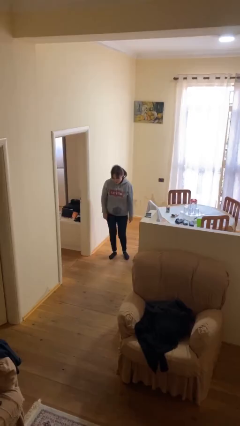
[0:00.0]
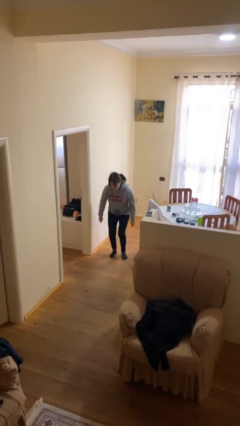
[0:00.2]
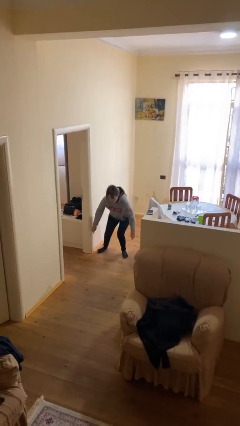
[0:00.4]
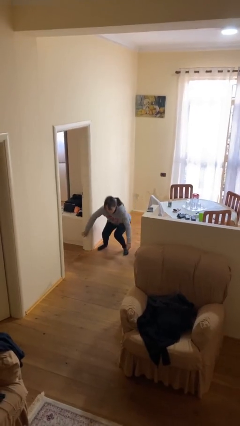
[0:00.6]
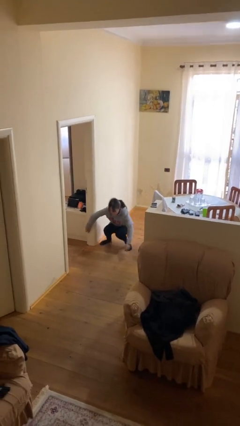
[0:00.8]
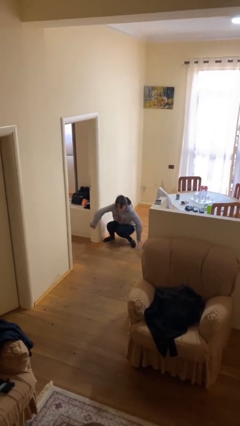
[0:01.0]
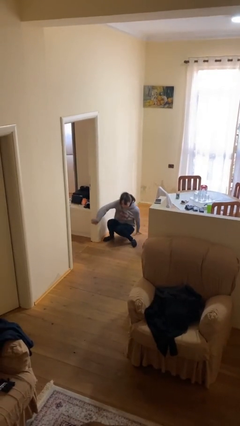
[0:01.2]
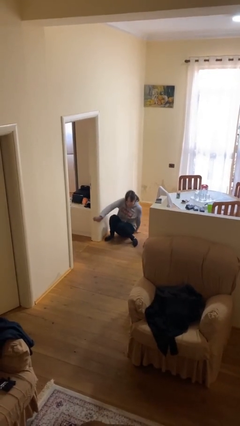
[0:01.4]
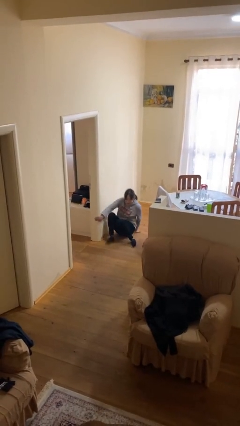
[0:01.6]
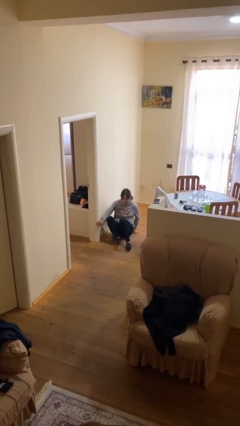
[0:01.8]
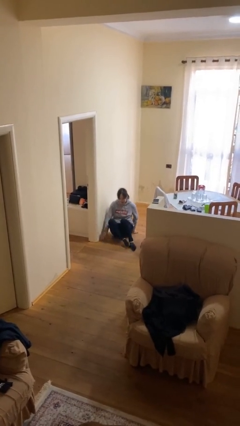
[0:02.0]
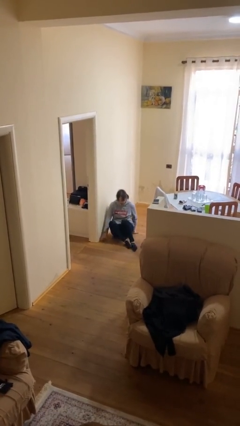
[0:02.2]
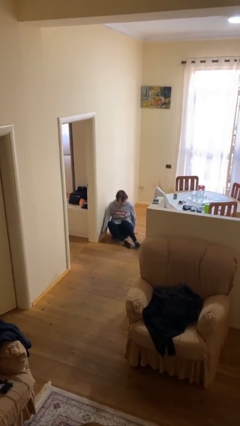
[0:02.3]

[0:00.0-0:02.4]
person sits down

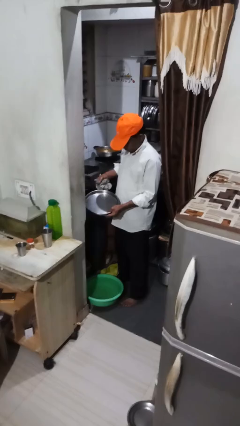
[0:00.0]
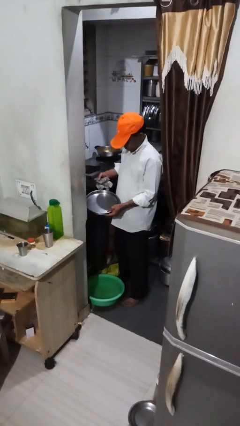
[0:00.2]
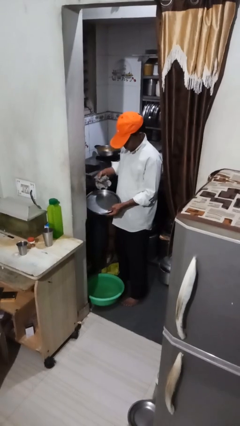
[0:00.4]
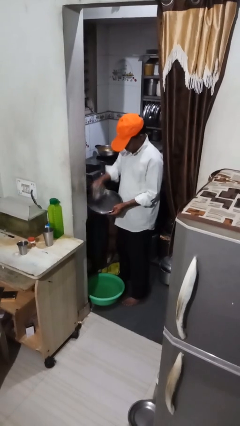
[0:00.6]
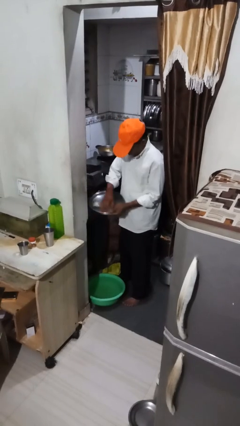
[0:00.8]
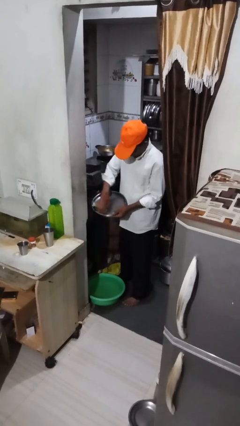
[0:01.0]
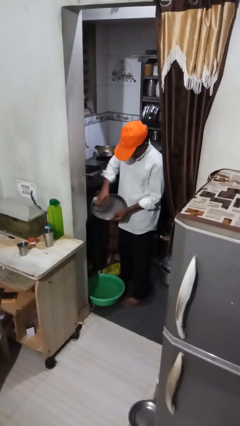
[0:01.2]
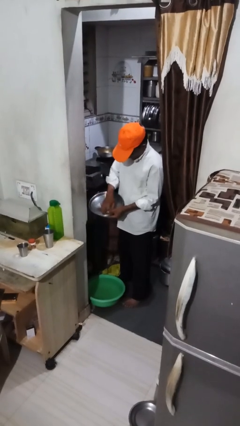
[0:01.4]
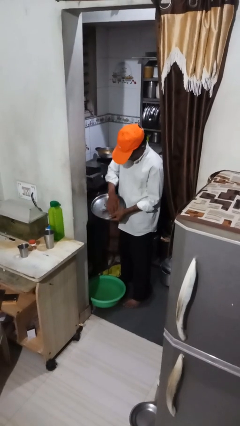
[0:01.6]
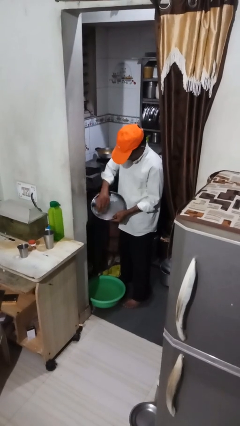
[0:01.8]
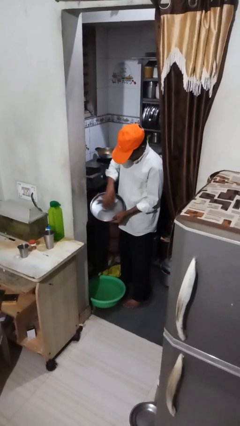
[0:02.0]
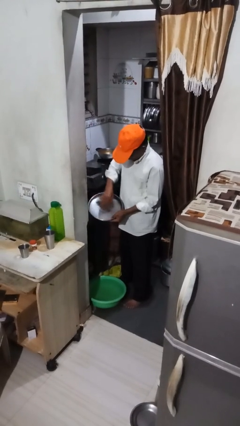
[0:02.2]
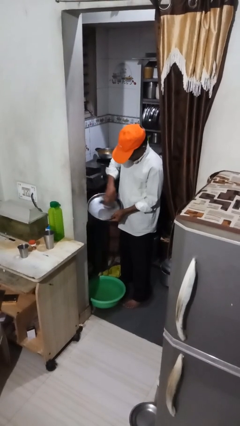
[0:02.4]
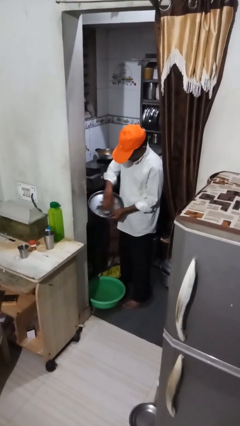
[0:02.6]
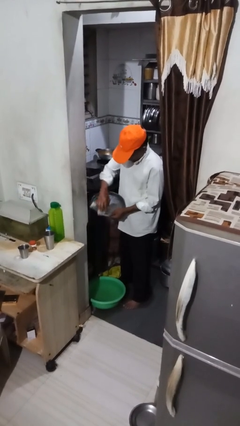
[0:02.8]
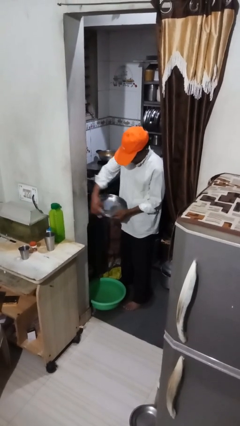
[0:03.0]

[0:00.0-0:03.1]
person dries dish

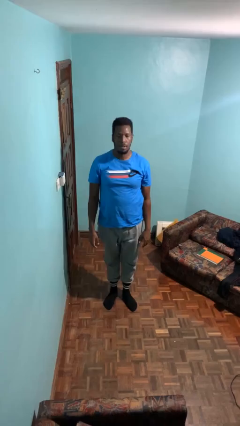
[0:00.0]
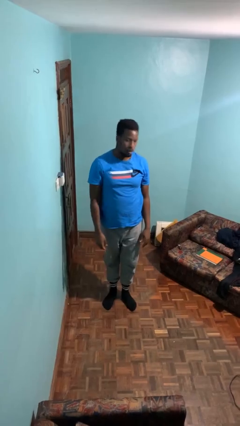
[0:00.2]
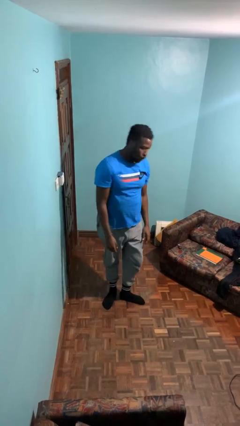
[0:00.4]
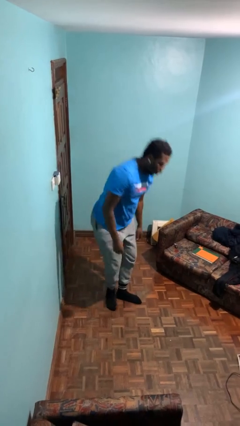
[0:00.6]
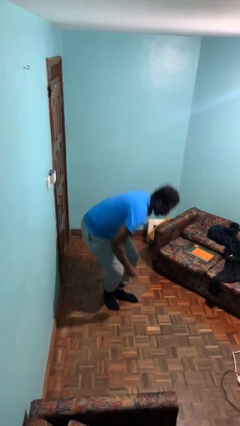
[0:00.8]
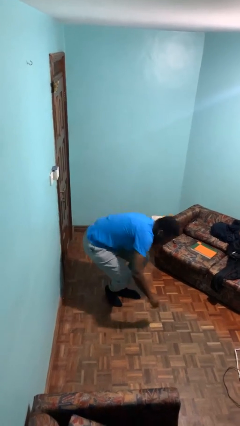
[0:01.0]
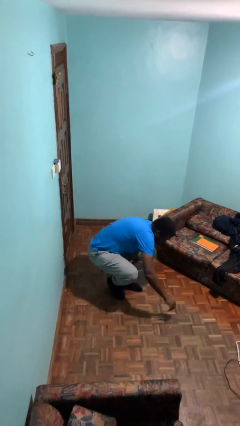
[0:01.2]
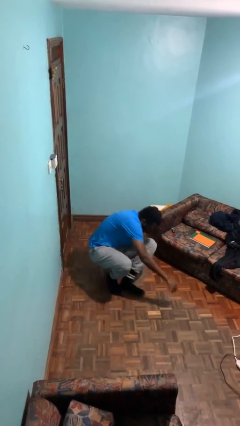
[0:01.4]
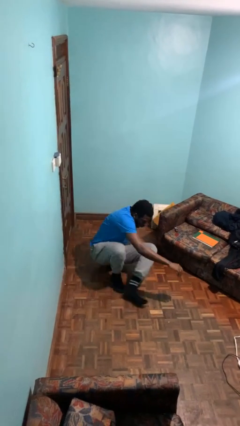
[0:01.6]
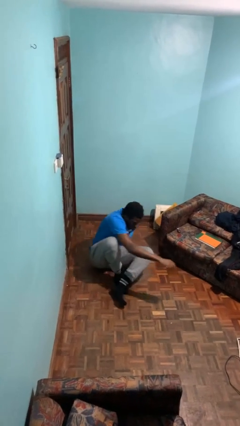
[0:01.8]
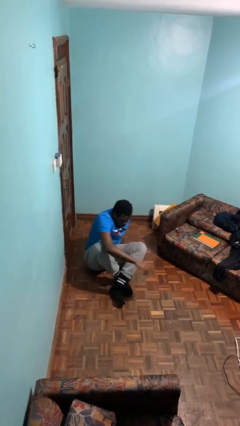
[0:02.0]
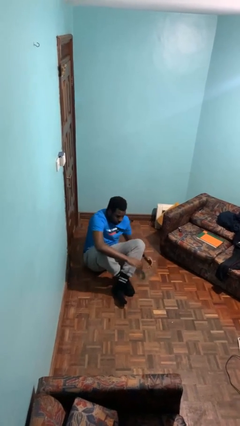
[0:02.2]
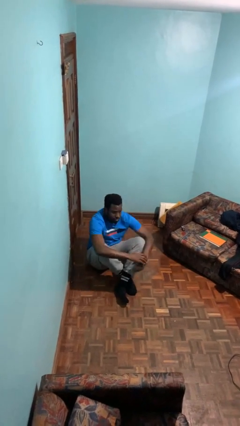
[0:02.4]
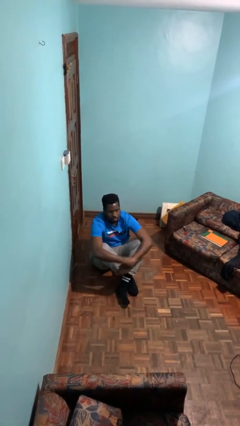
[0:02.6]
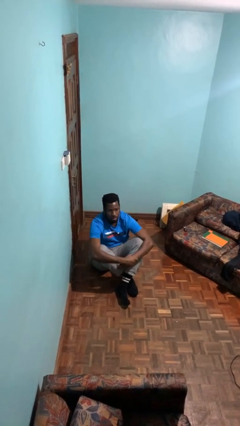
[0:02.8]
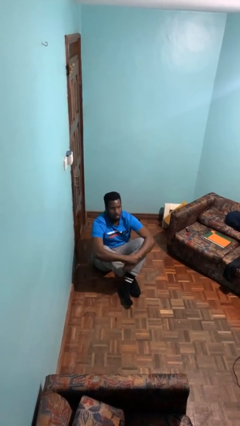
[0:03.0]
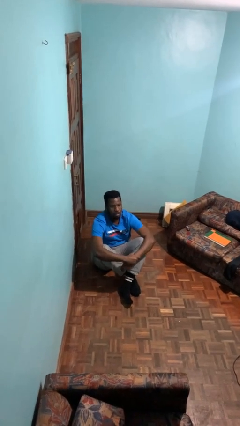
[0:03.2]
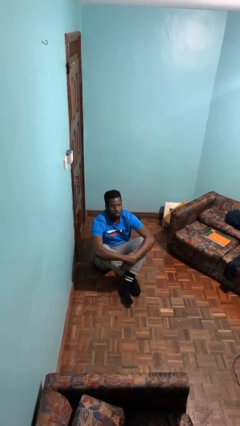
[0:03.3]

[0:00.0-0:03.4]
person sits crisscross

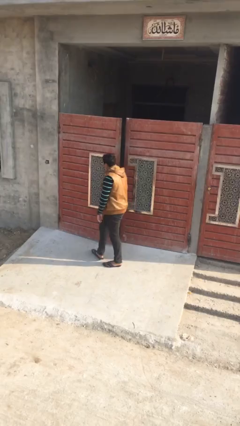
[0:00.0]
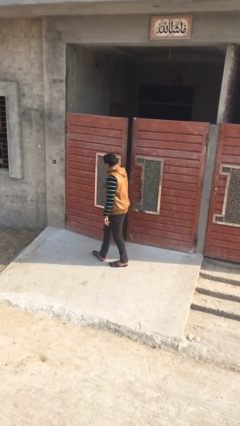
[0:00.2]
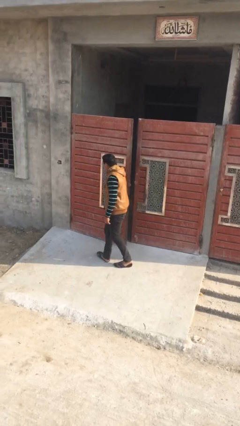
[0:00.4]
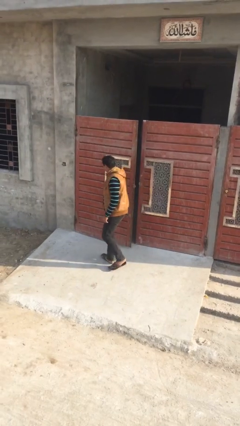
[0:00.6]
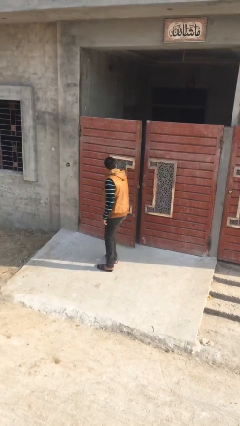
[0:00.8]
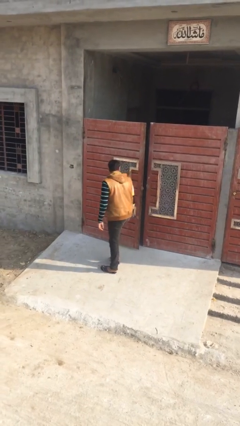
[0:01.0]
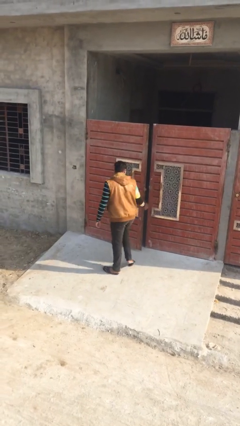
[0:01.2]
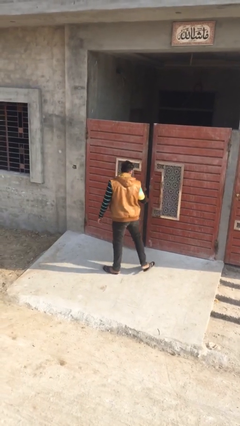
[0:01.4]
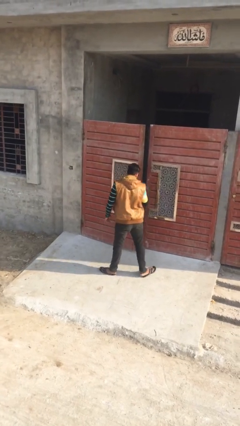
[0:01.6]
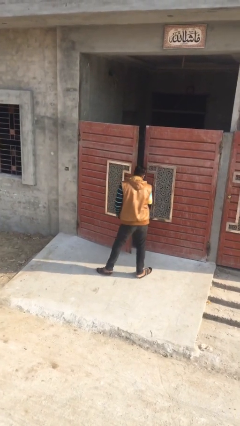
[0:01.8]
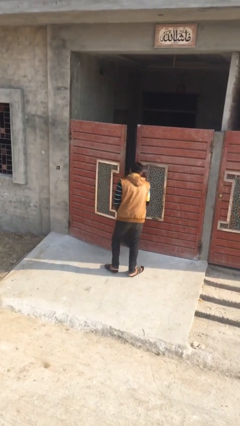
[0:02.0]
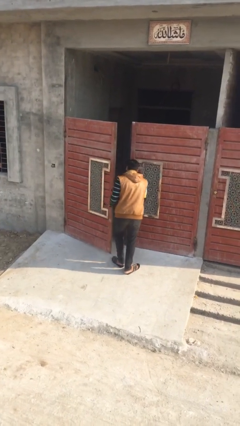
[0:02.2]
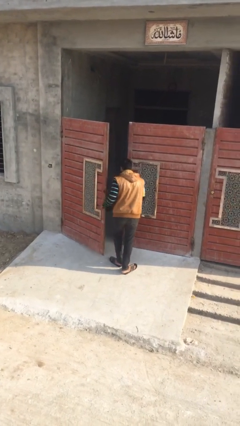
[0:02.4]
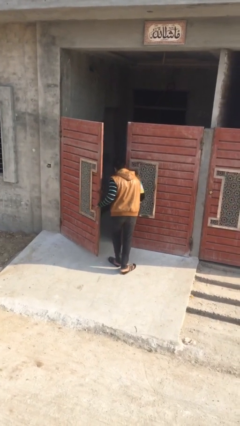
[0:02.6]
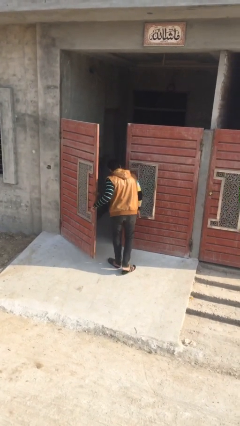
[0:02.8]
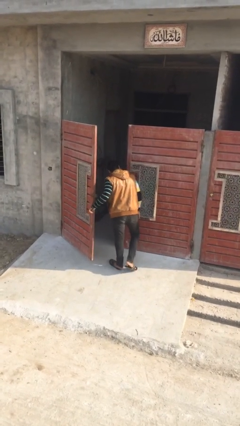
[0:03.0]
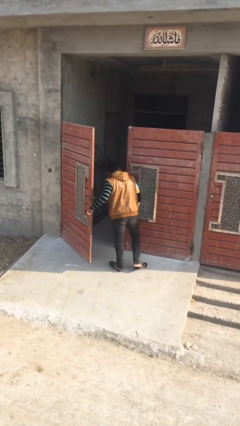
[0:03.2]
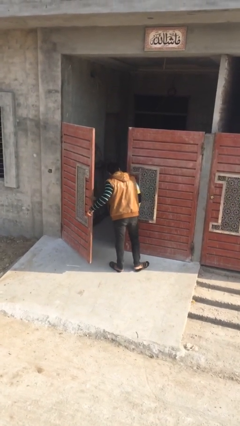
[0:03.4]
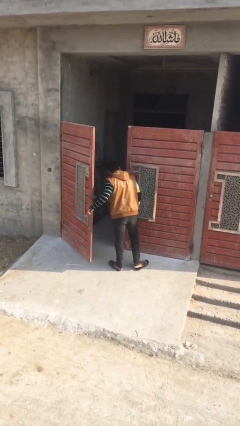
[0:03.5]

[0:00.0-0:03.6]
person opens facility door

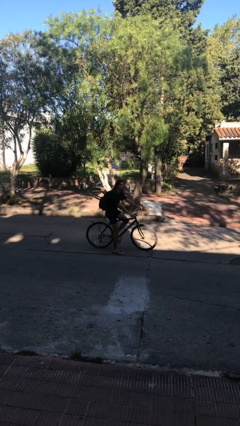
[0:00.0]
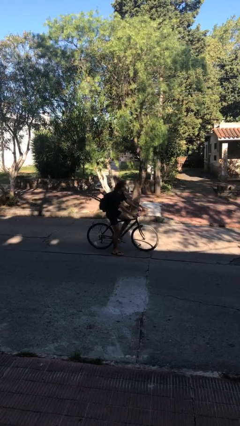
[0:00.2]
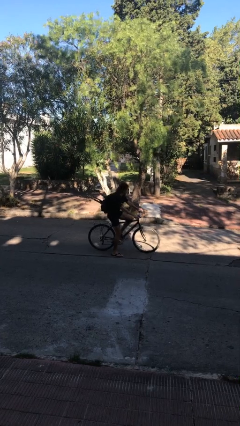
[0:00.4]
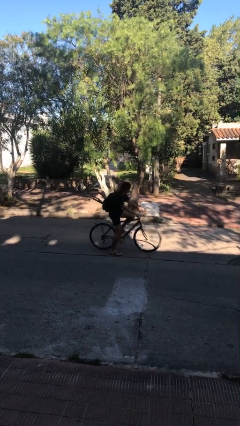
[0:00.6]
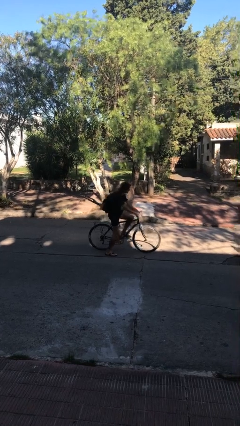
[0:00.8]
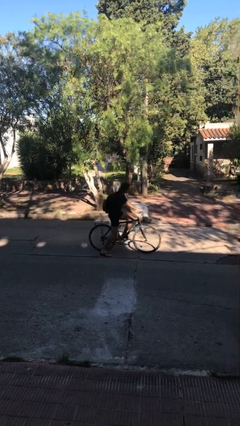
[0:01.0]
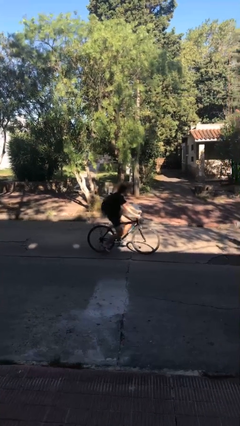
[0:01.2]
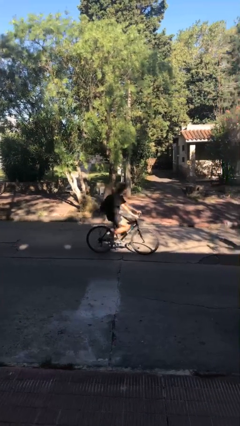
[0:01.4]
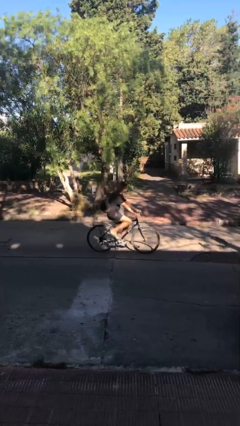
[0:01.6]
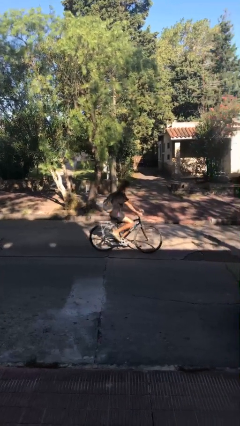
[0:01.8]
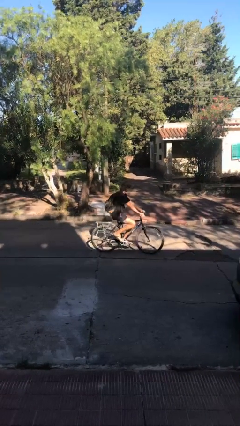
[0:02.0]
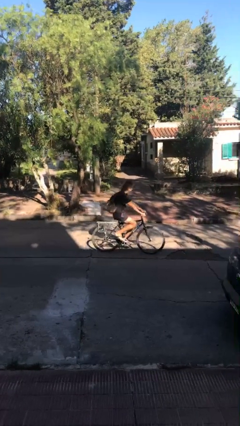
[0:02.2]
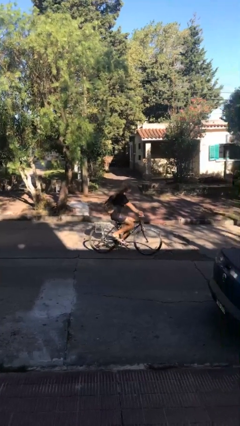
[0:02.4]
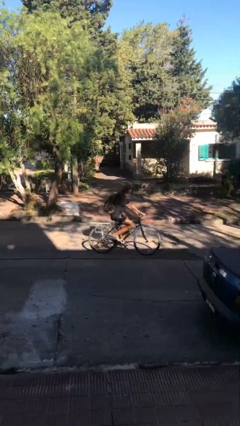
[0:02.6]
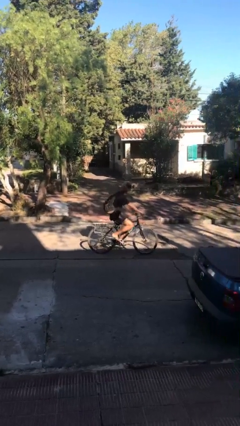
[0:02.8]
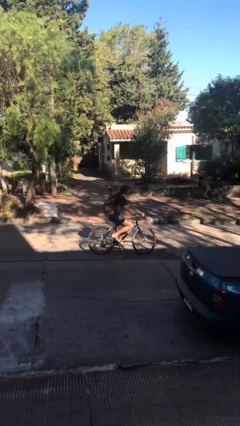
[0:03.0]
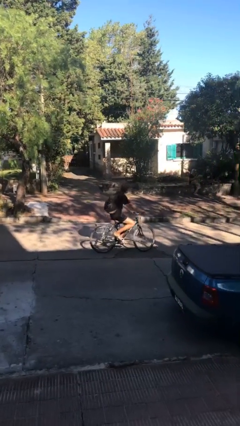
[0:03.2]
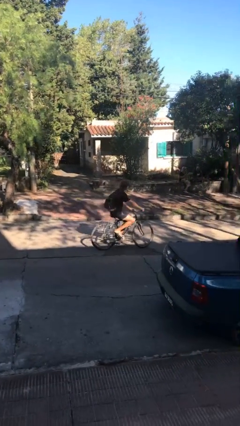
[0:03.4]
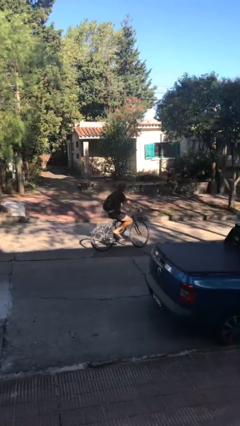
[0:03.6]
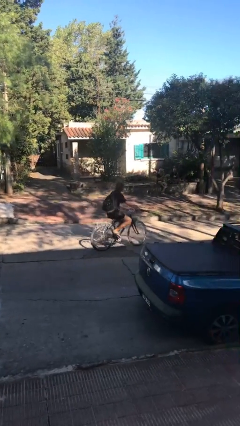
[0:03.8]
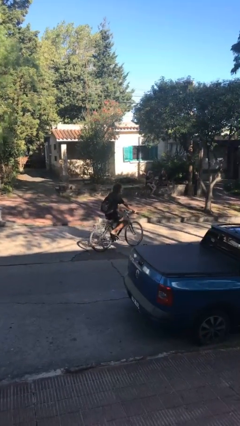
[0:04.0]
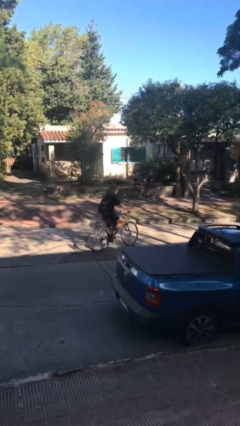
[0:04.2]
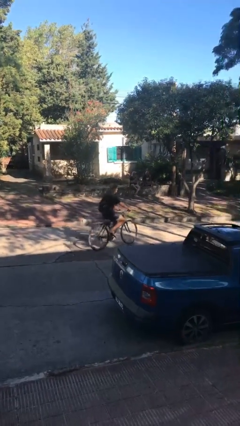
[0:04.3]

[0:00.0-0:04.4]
person rides bicycle

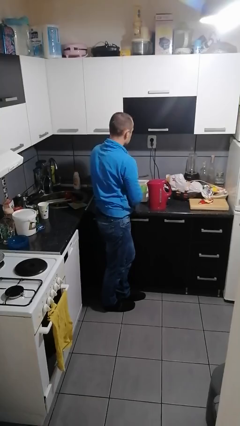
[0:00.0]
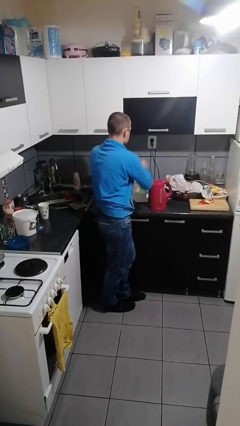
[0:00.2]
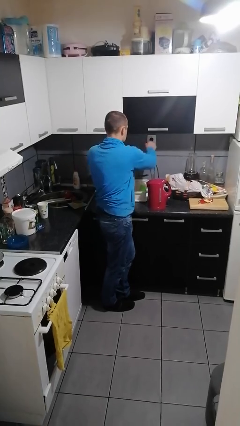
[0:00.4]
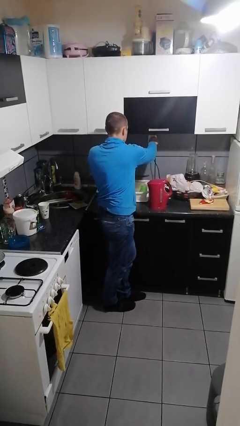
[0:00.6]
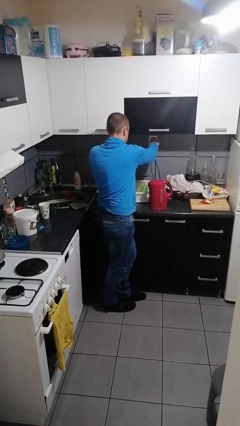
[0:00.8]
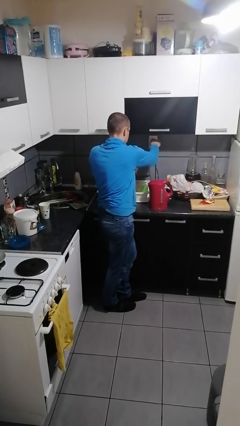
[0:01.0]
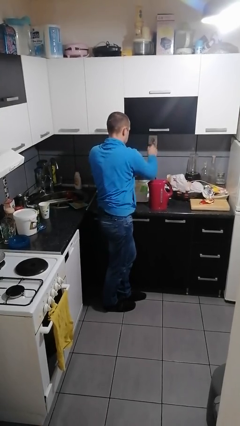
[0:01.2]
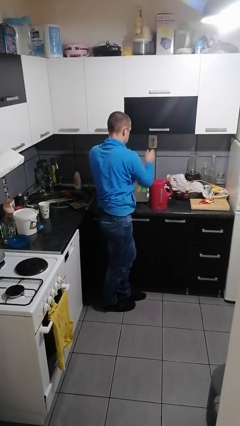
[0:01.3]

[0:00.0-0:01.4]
person unplugs from electrical socket
